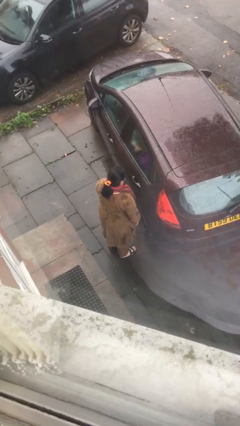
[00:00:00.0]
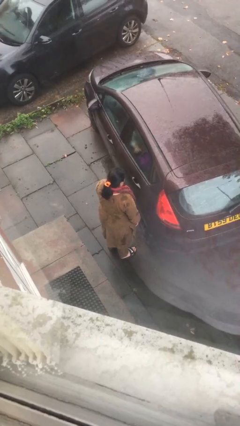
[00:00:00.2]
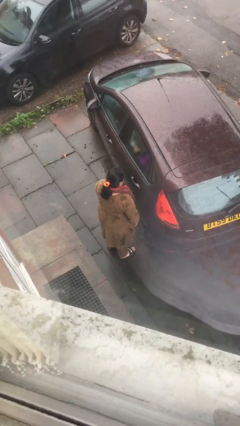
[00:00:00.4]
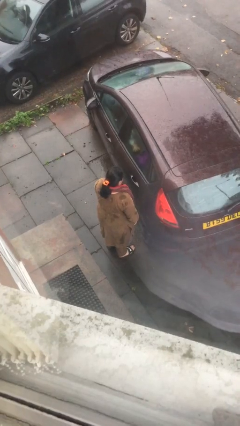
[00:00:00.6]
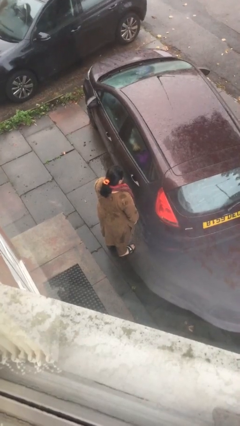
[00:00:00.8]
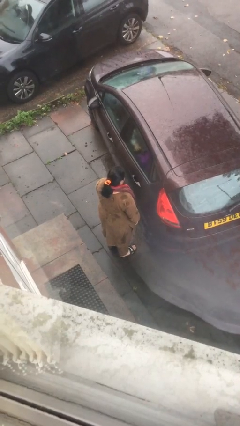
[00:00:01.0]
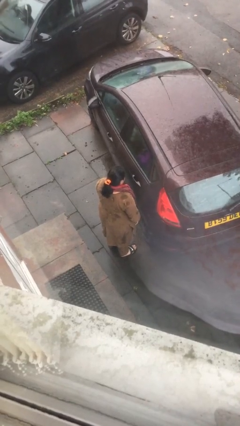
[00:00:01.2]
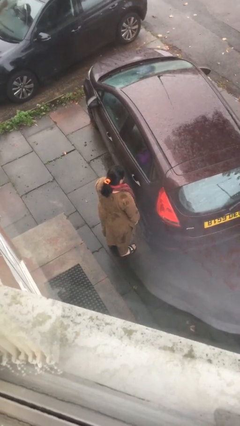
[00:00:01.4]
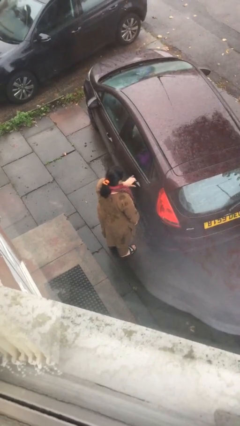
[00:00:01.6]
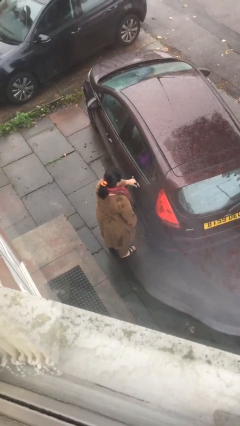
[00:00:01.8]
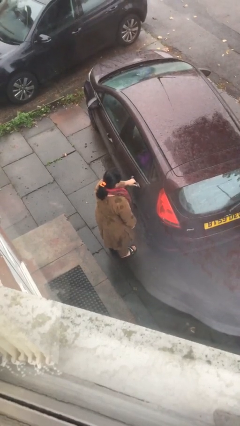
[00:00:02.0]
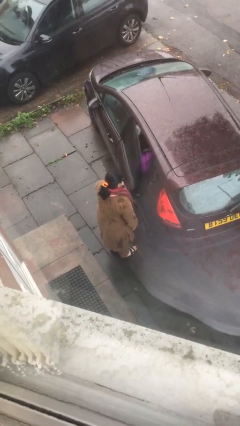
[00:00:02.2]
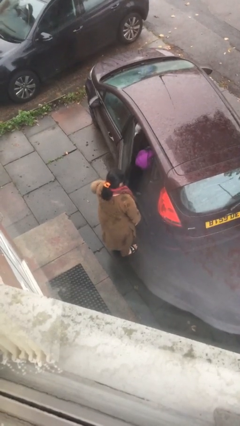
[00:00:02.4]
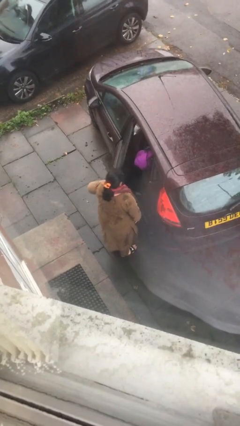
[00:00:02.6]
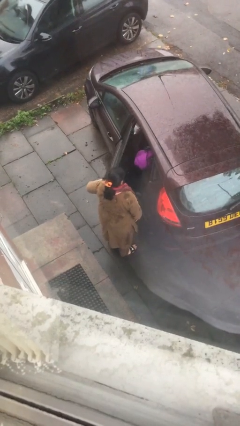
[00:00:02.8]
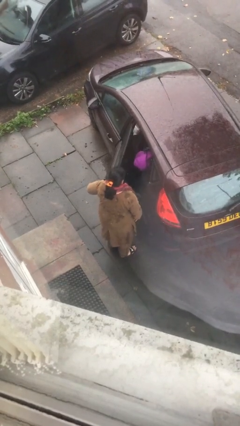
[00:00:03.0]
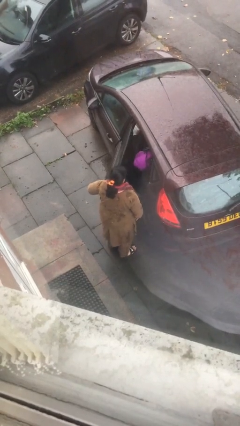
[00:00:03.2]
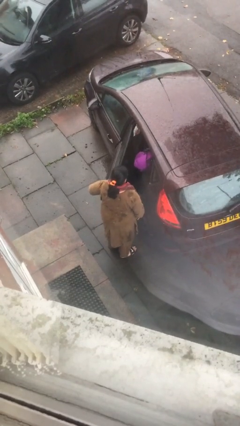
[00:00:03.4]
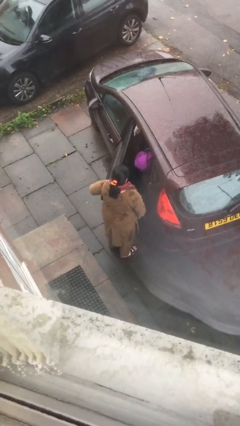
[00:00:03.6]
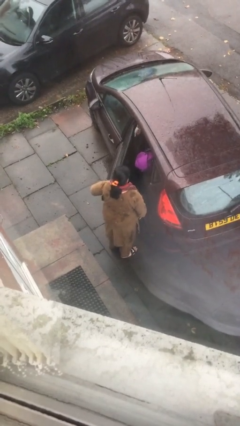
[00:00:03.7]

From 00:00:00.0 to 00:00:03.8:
person opens car door

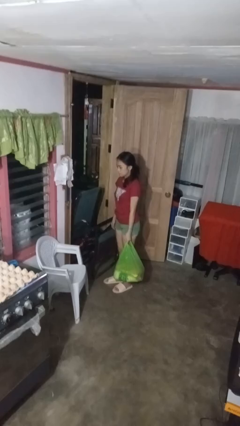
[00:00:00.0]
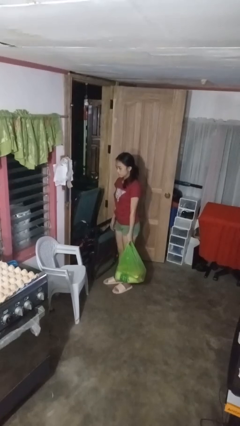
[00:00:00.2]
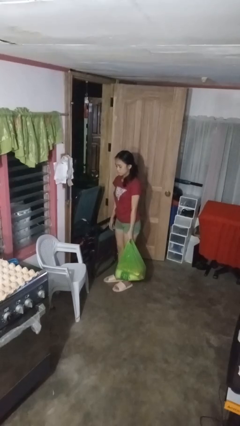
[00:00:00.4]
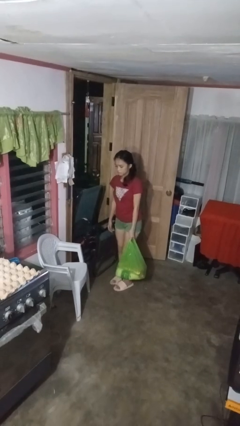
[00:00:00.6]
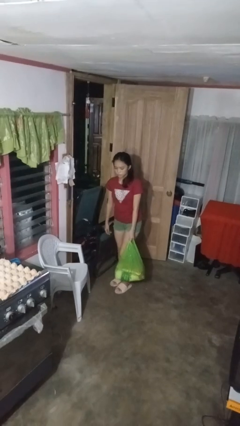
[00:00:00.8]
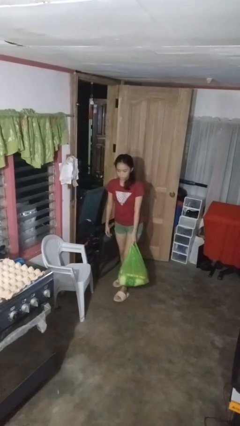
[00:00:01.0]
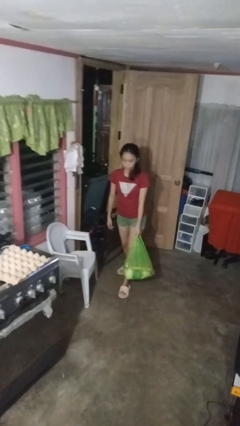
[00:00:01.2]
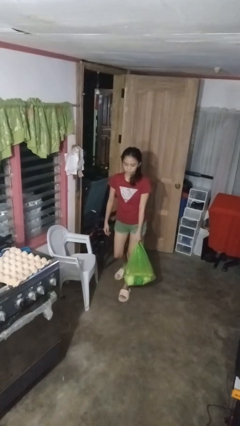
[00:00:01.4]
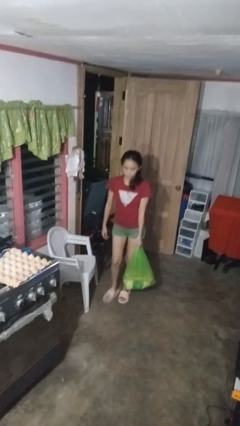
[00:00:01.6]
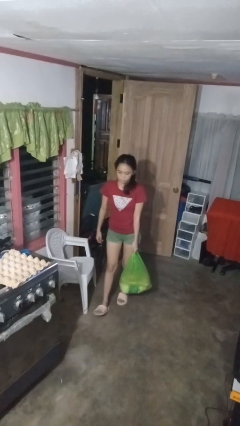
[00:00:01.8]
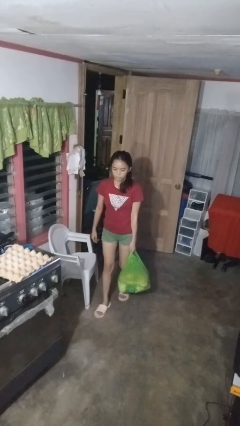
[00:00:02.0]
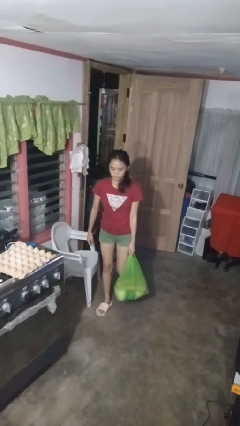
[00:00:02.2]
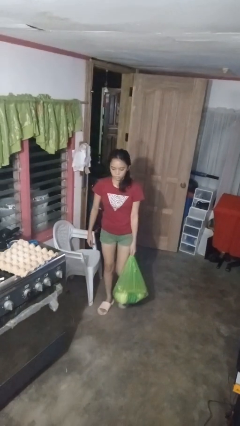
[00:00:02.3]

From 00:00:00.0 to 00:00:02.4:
person carries groceries

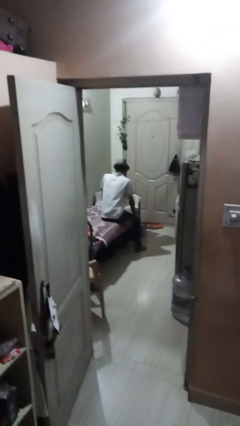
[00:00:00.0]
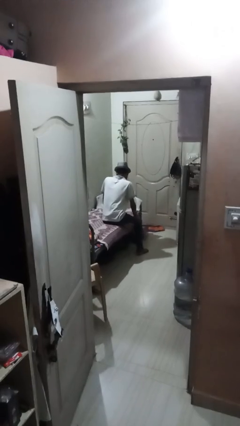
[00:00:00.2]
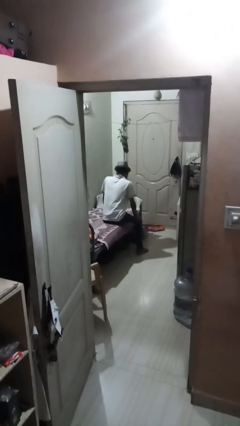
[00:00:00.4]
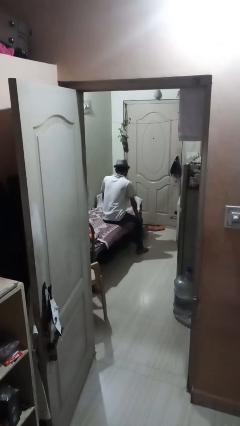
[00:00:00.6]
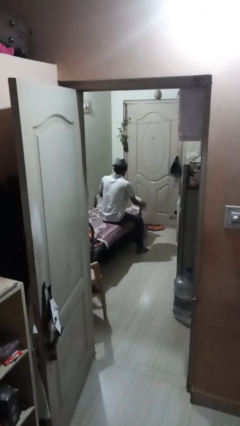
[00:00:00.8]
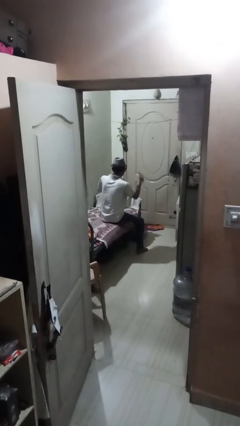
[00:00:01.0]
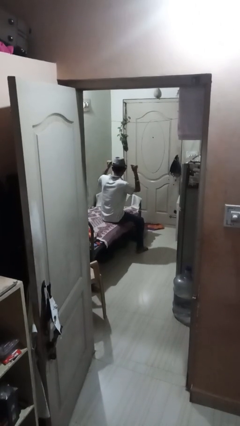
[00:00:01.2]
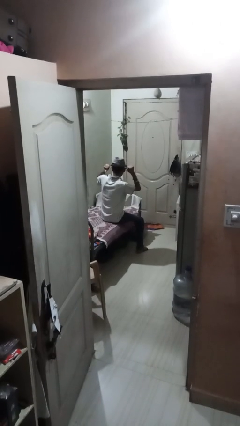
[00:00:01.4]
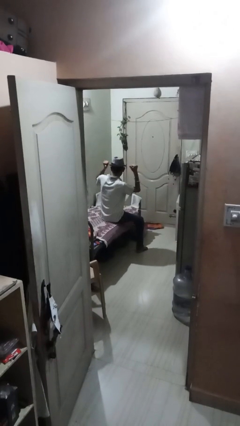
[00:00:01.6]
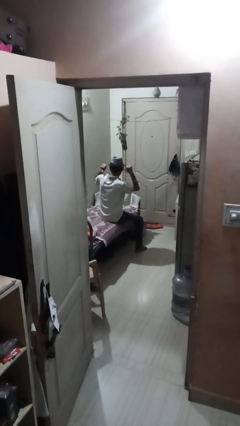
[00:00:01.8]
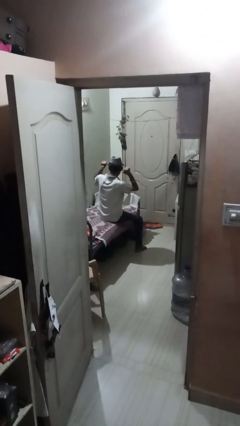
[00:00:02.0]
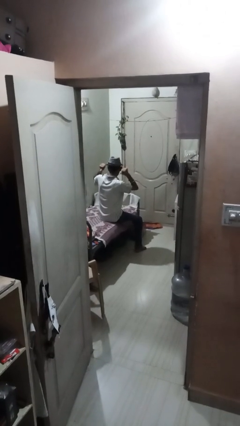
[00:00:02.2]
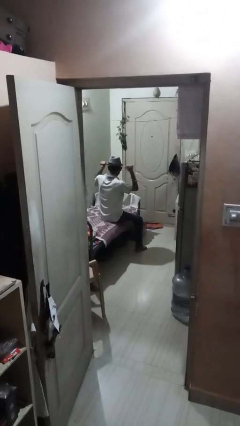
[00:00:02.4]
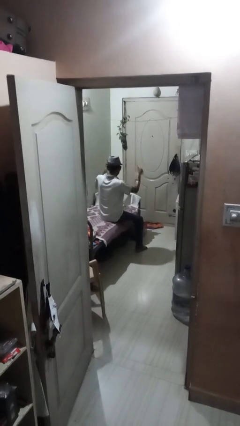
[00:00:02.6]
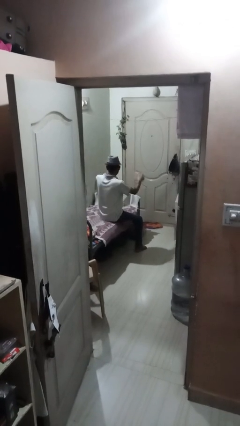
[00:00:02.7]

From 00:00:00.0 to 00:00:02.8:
person gestures behind me

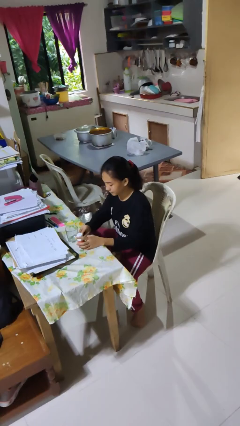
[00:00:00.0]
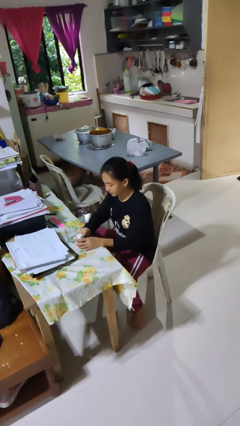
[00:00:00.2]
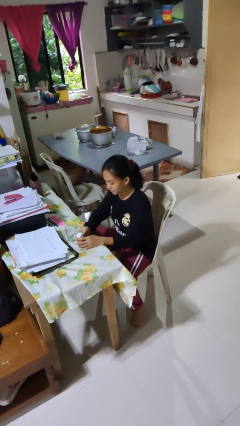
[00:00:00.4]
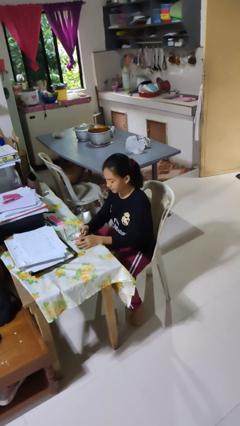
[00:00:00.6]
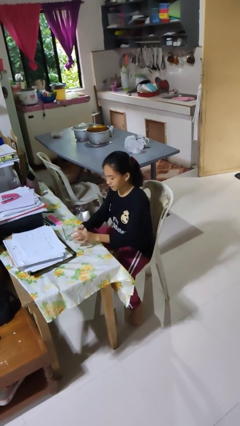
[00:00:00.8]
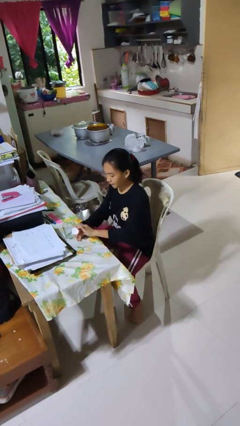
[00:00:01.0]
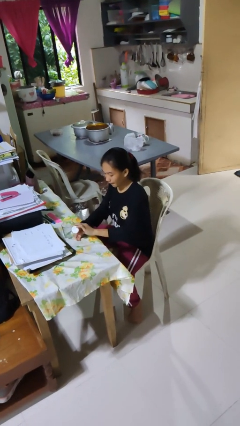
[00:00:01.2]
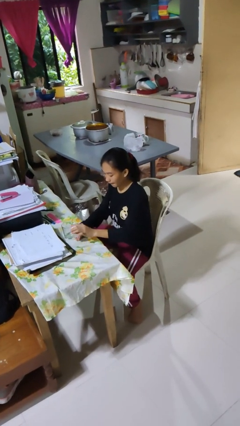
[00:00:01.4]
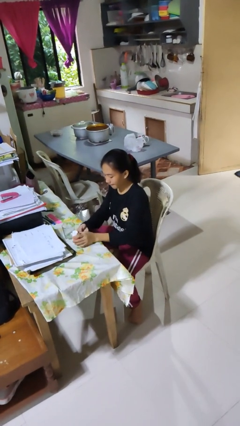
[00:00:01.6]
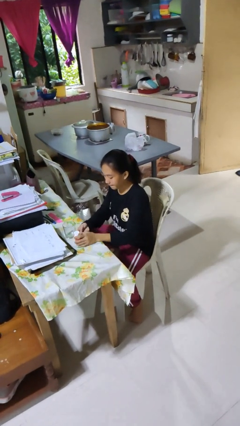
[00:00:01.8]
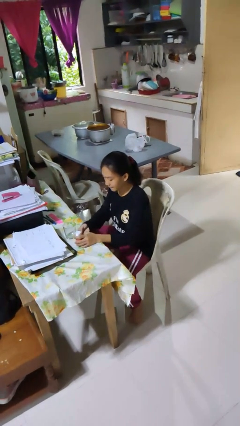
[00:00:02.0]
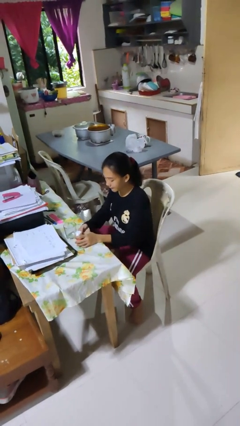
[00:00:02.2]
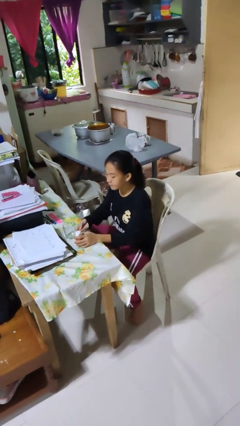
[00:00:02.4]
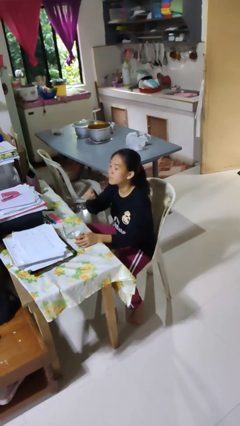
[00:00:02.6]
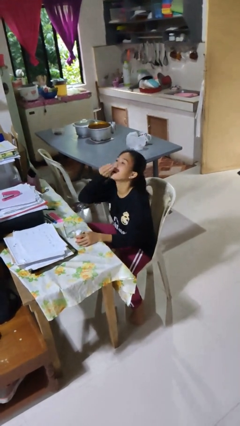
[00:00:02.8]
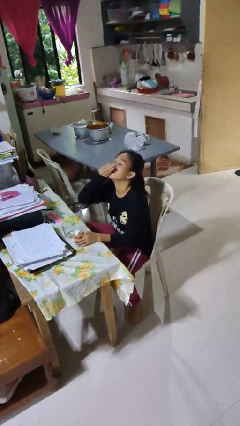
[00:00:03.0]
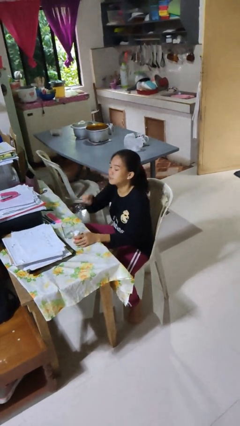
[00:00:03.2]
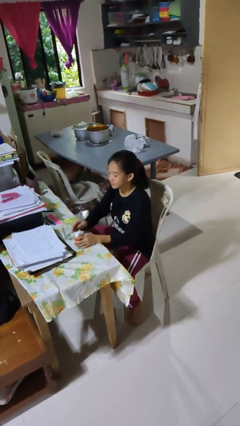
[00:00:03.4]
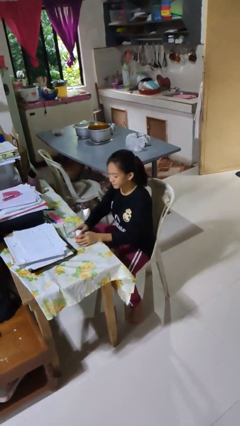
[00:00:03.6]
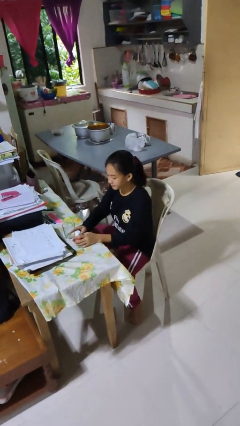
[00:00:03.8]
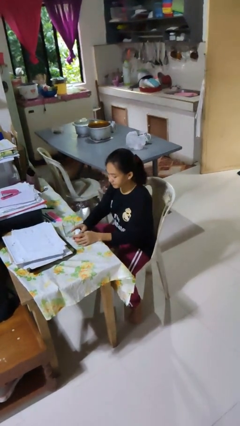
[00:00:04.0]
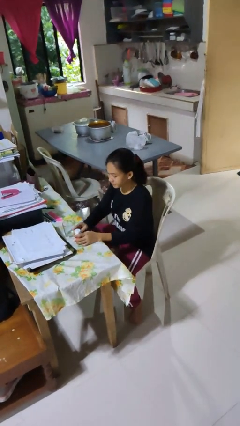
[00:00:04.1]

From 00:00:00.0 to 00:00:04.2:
person takes medicine pills

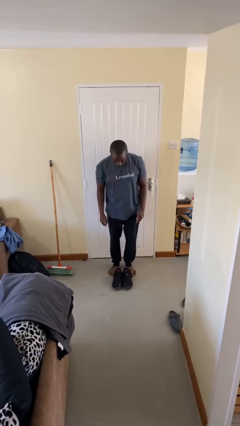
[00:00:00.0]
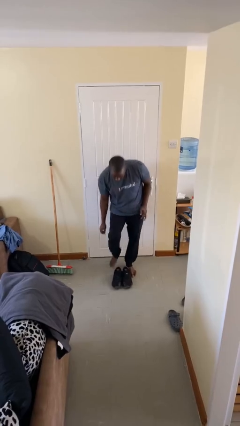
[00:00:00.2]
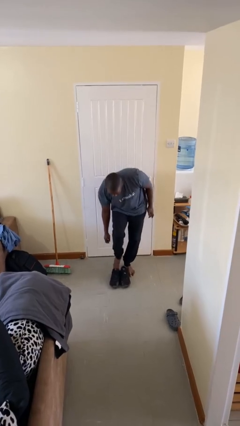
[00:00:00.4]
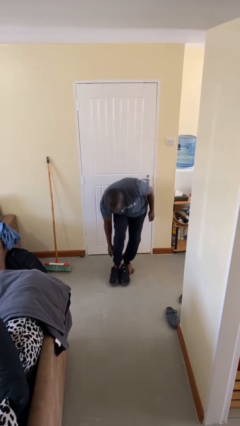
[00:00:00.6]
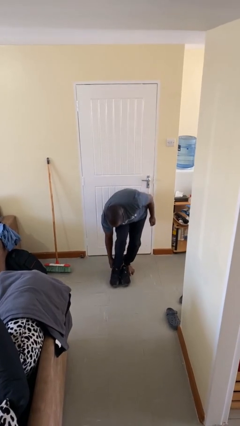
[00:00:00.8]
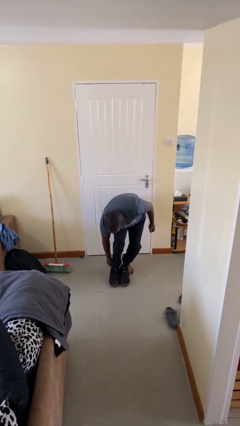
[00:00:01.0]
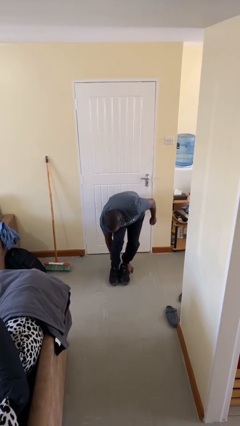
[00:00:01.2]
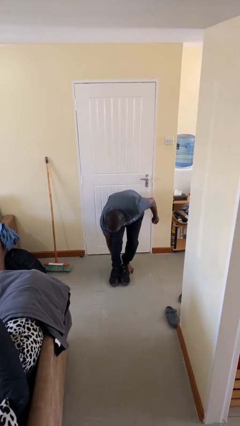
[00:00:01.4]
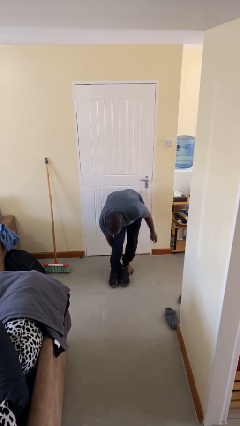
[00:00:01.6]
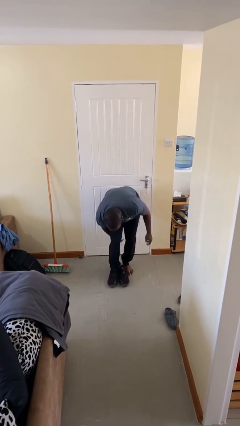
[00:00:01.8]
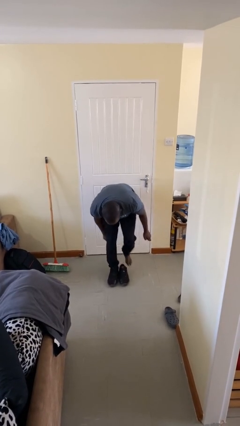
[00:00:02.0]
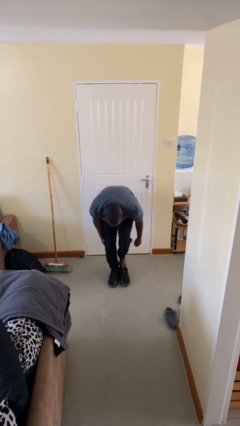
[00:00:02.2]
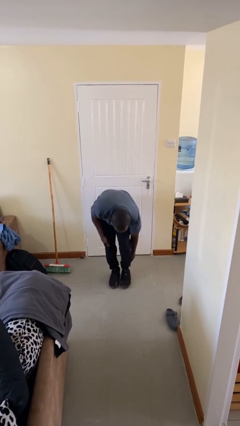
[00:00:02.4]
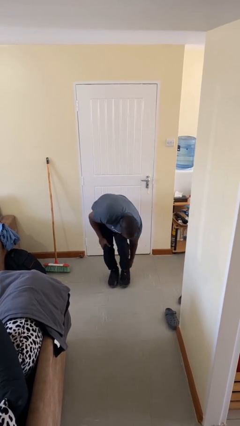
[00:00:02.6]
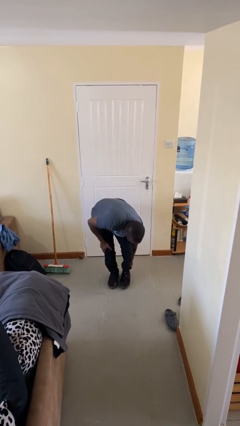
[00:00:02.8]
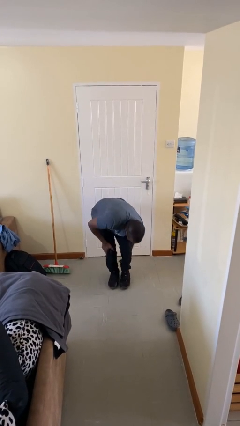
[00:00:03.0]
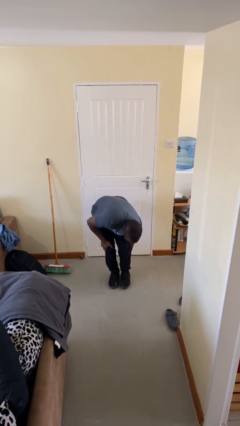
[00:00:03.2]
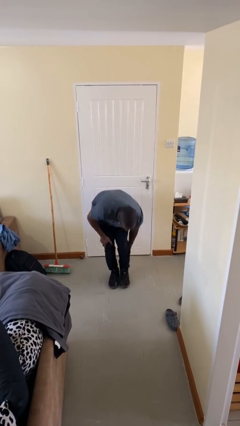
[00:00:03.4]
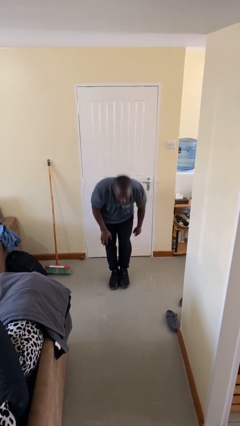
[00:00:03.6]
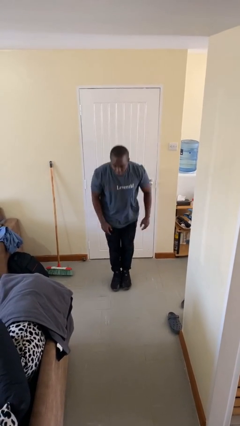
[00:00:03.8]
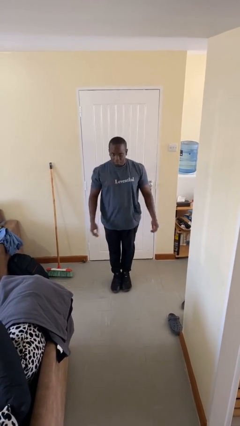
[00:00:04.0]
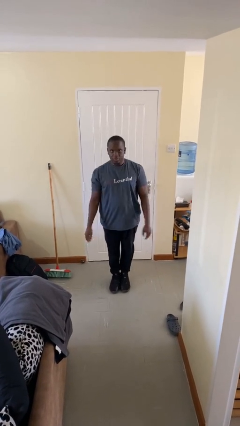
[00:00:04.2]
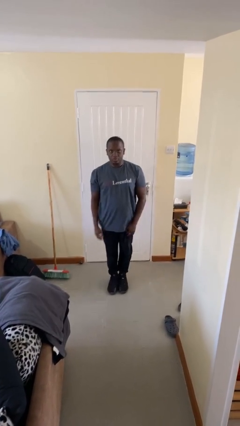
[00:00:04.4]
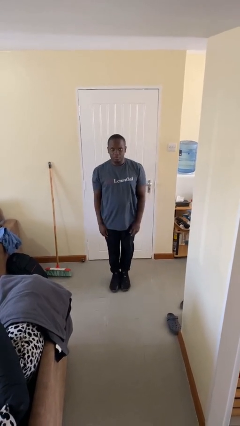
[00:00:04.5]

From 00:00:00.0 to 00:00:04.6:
person puts on shoes
